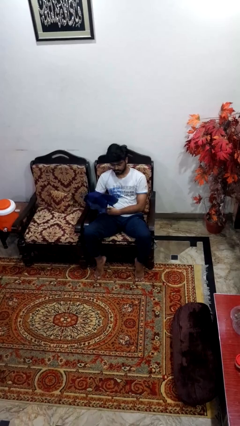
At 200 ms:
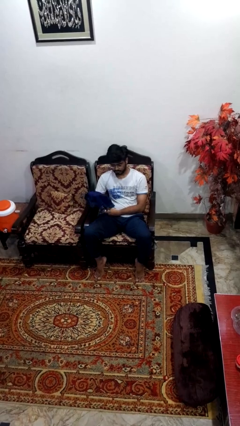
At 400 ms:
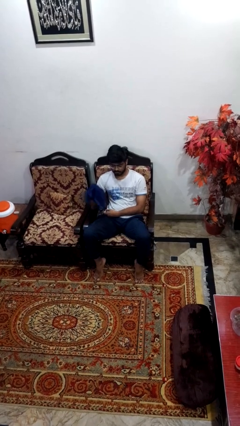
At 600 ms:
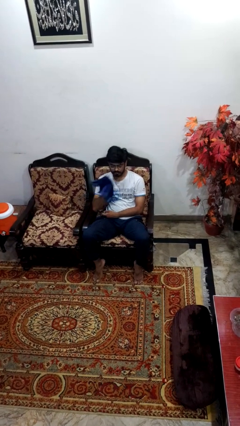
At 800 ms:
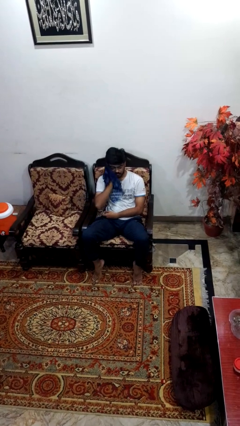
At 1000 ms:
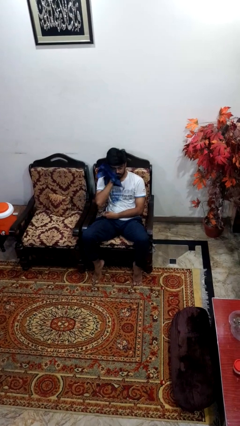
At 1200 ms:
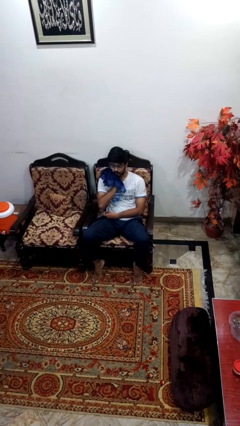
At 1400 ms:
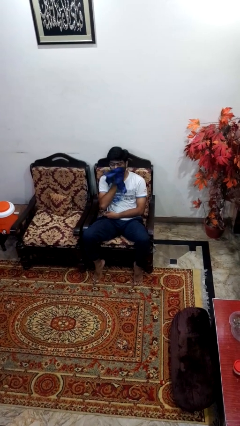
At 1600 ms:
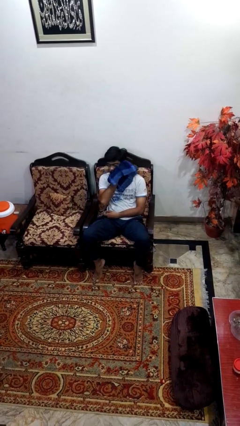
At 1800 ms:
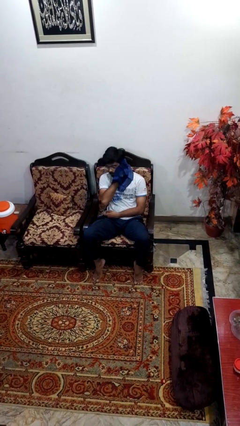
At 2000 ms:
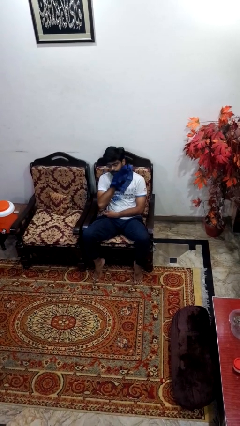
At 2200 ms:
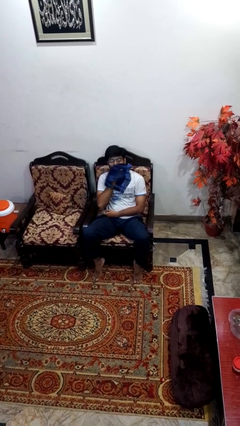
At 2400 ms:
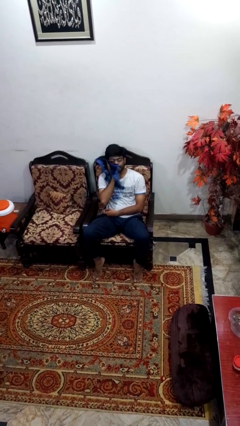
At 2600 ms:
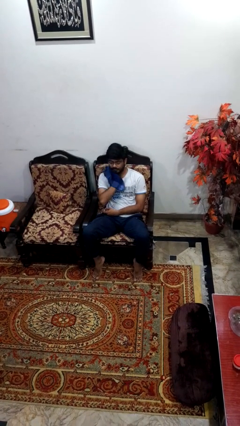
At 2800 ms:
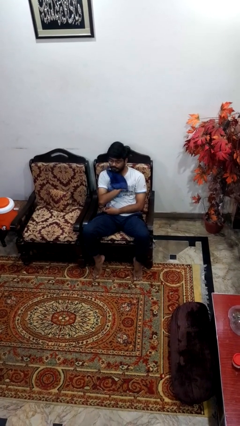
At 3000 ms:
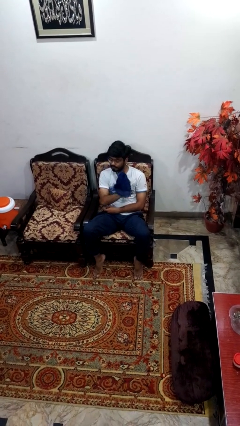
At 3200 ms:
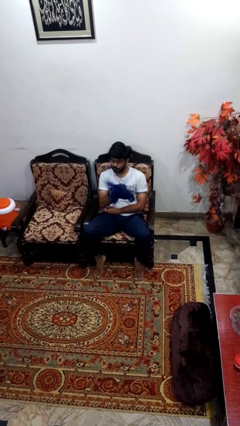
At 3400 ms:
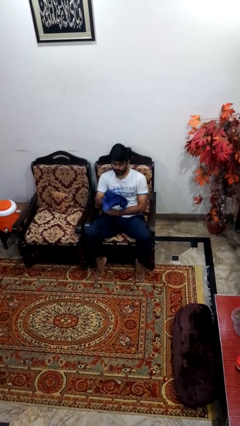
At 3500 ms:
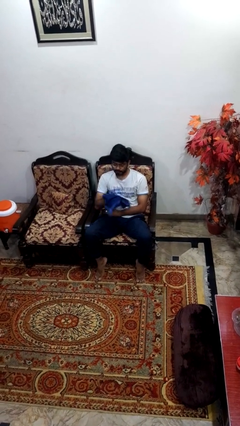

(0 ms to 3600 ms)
person wipes mouth with napkin

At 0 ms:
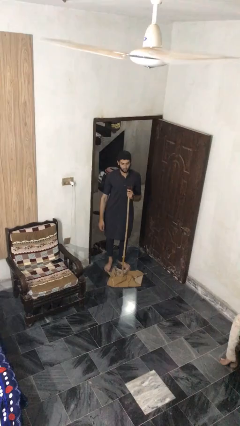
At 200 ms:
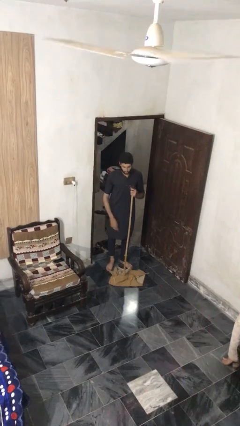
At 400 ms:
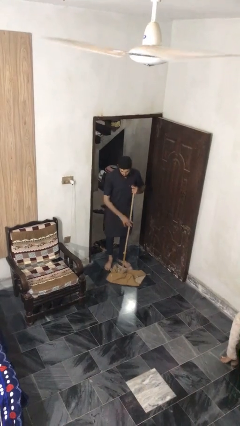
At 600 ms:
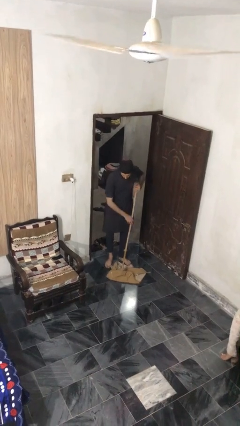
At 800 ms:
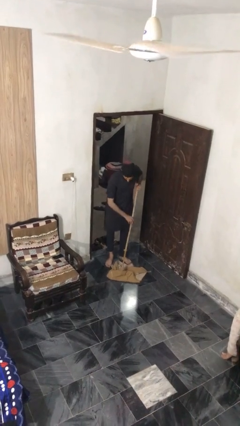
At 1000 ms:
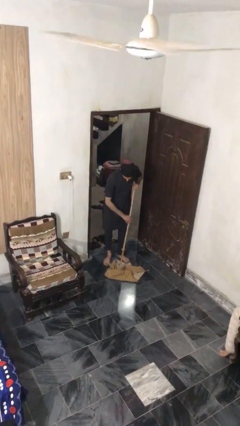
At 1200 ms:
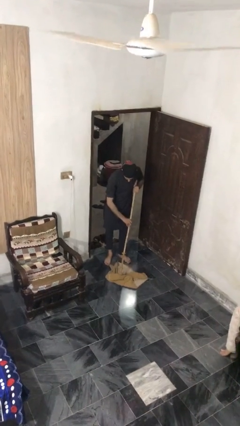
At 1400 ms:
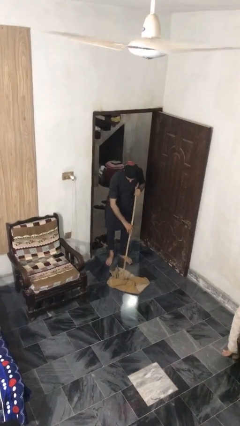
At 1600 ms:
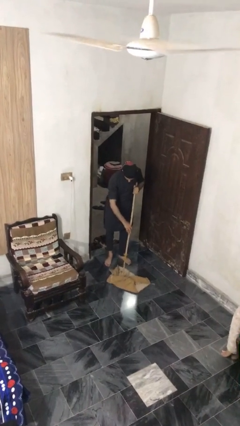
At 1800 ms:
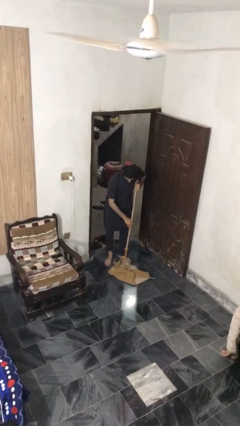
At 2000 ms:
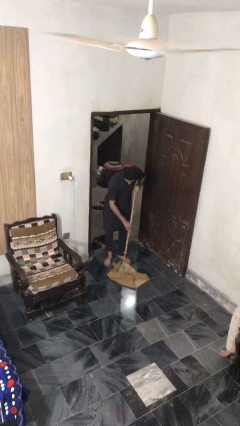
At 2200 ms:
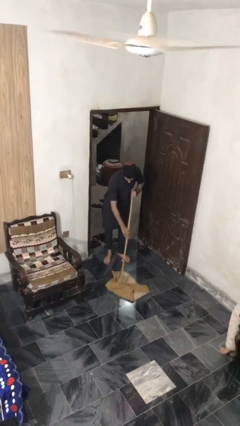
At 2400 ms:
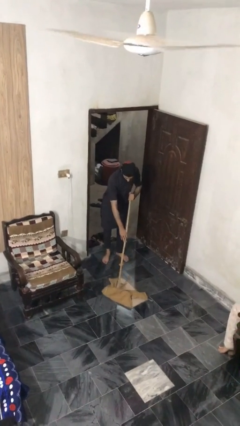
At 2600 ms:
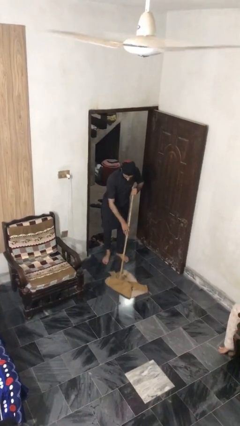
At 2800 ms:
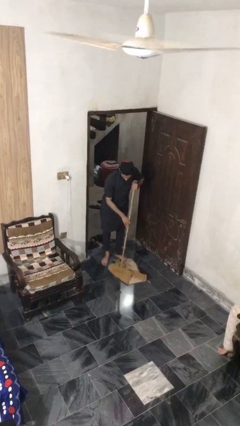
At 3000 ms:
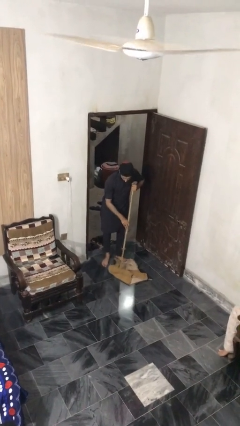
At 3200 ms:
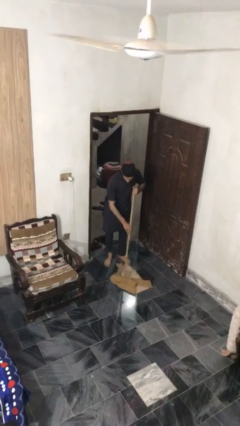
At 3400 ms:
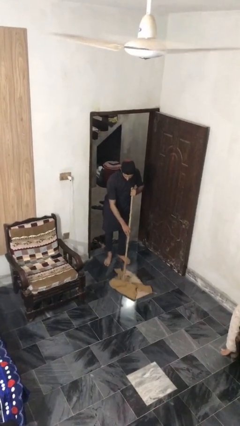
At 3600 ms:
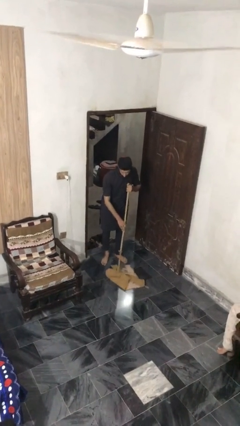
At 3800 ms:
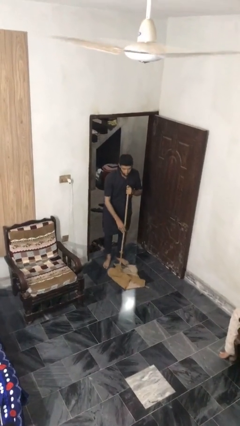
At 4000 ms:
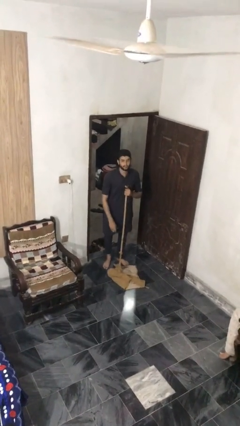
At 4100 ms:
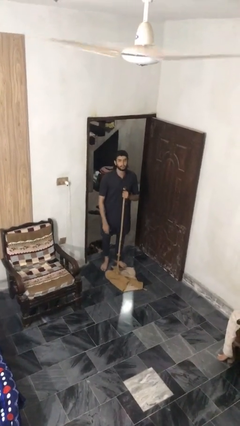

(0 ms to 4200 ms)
person mops

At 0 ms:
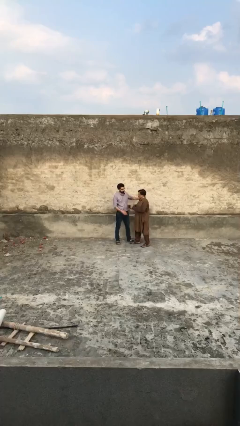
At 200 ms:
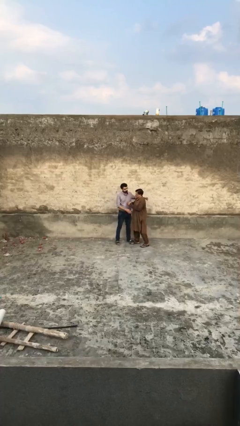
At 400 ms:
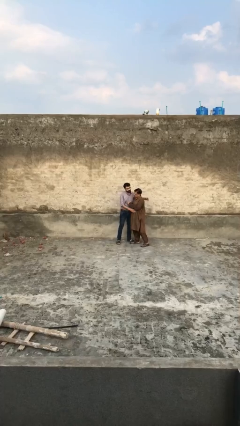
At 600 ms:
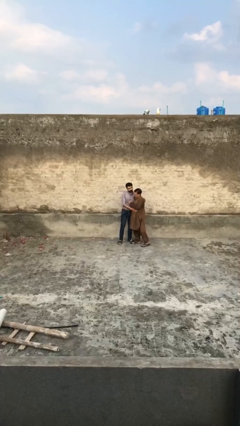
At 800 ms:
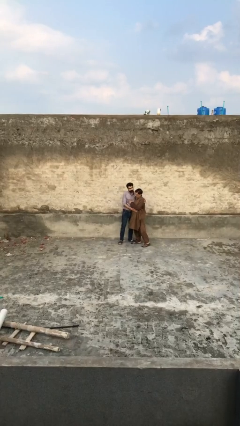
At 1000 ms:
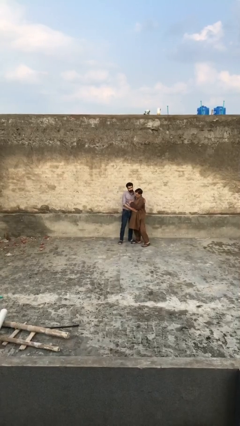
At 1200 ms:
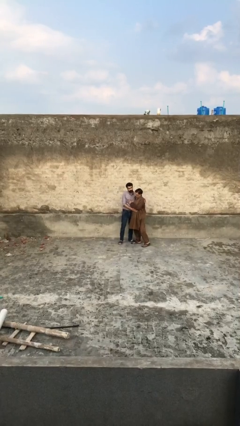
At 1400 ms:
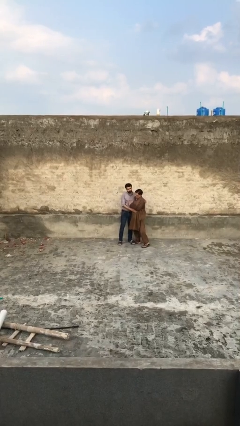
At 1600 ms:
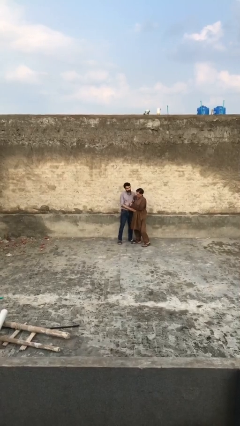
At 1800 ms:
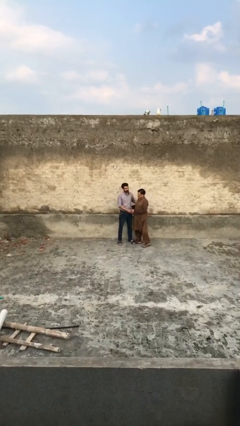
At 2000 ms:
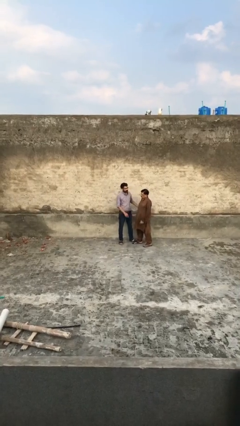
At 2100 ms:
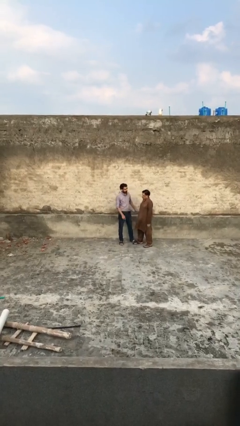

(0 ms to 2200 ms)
person embraces person

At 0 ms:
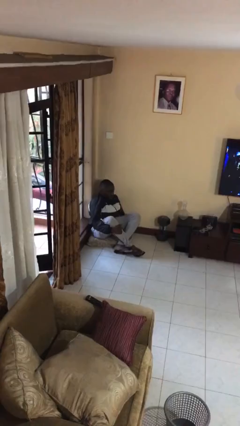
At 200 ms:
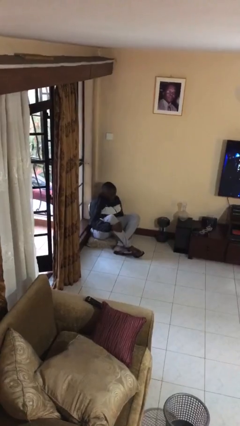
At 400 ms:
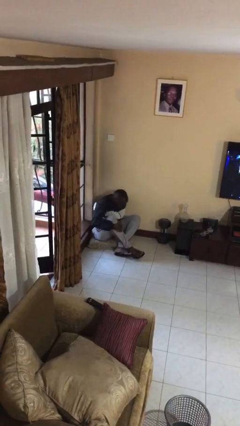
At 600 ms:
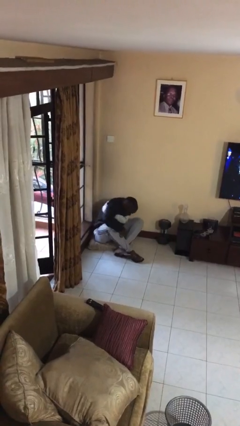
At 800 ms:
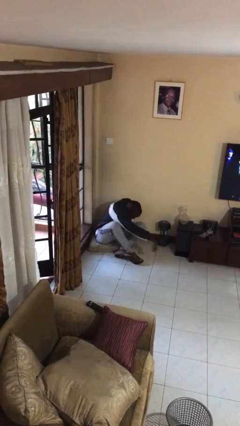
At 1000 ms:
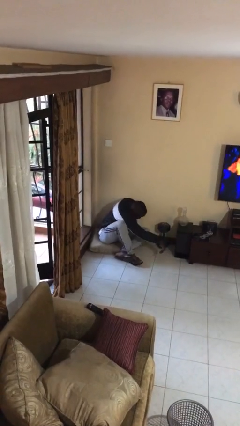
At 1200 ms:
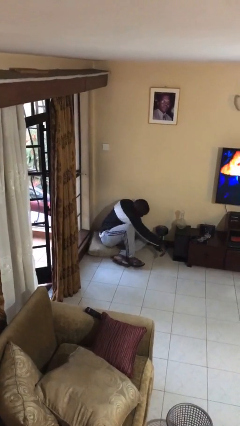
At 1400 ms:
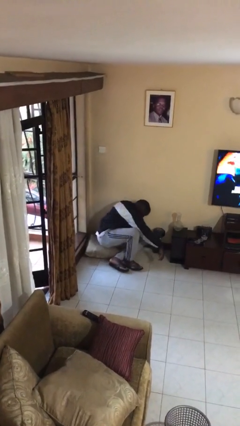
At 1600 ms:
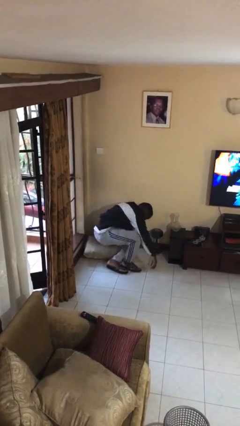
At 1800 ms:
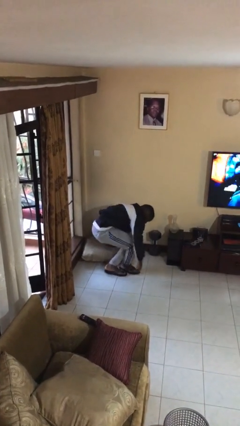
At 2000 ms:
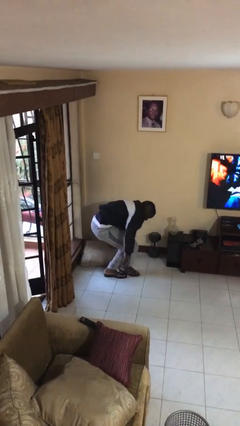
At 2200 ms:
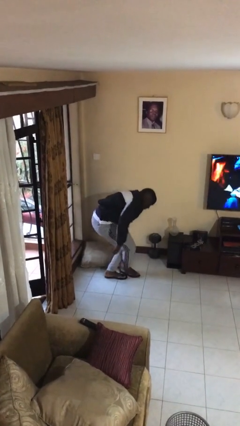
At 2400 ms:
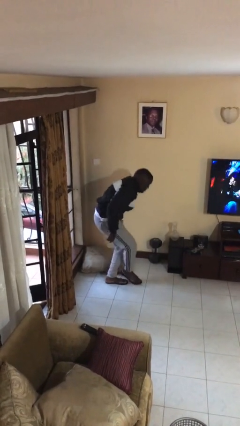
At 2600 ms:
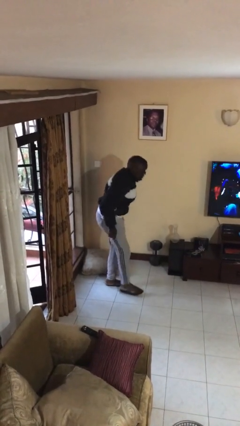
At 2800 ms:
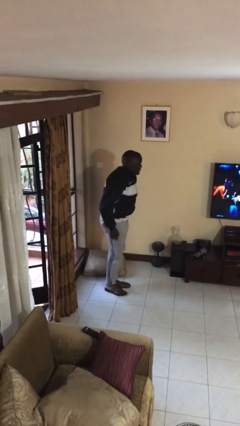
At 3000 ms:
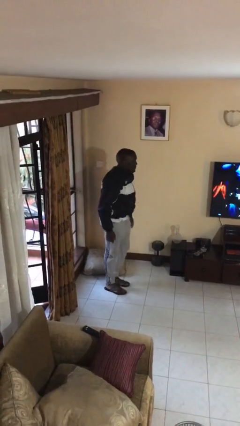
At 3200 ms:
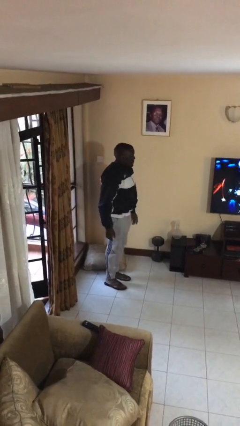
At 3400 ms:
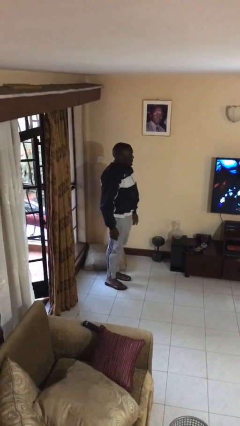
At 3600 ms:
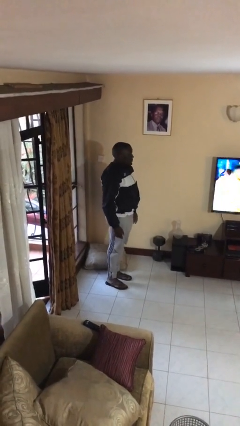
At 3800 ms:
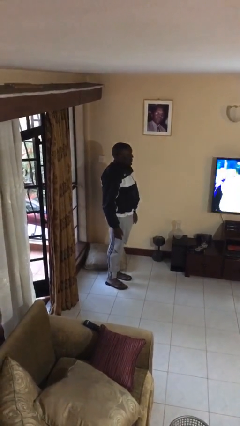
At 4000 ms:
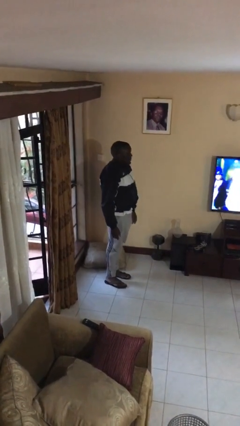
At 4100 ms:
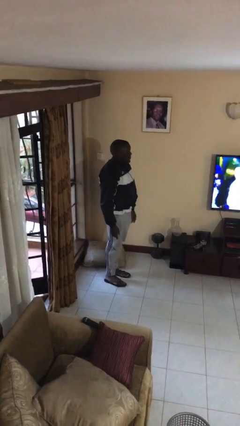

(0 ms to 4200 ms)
person stands up from floor

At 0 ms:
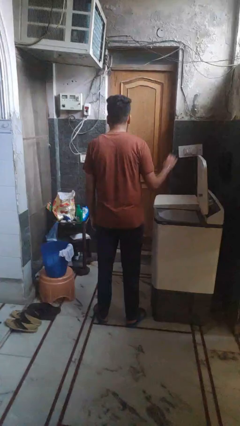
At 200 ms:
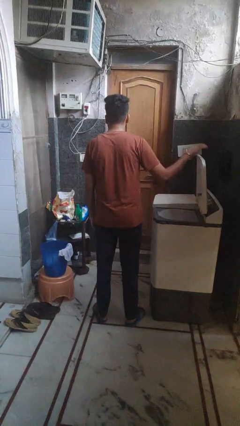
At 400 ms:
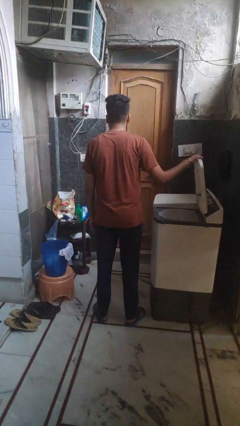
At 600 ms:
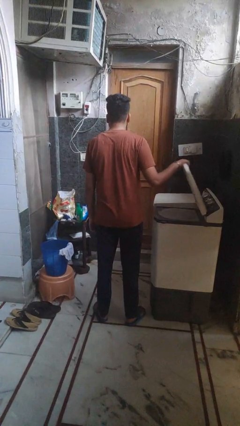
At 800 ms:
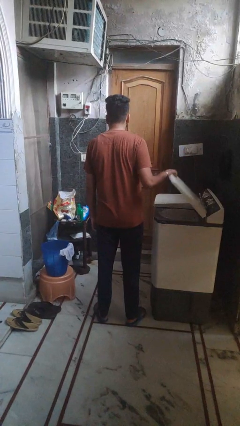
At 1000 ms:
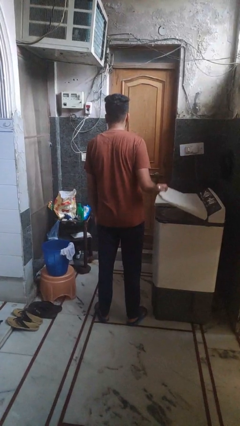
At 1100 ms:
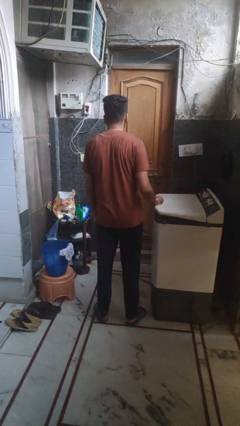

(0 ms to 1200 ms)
person closes clothes washer

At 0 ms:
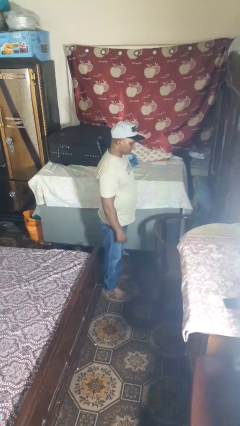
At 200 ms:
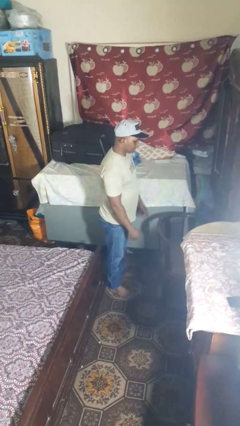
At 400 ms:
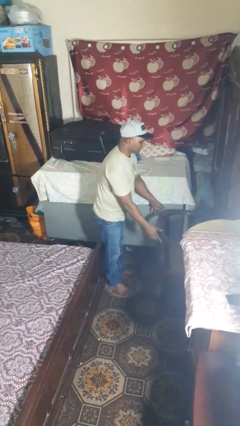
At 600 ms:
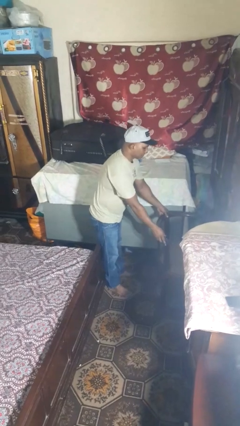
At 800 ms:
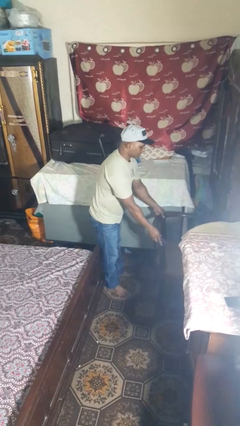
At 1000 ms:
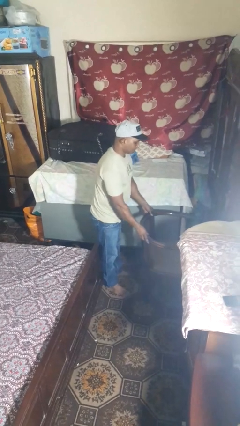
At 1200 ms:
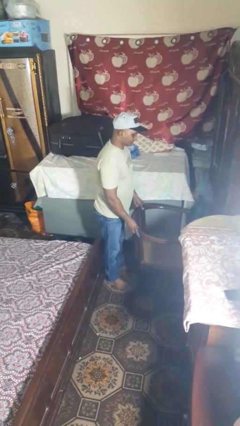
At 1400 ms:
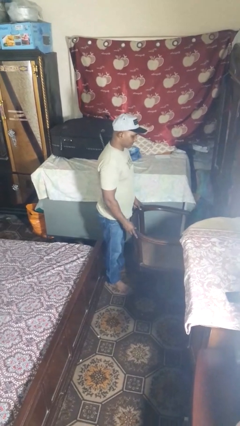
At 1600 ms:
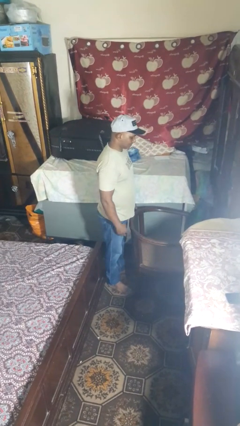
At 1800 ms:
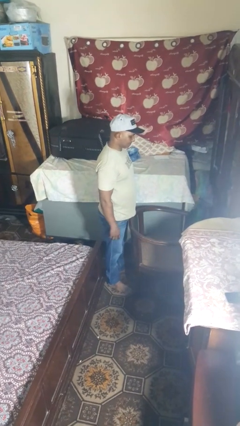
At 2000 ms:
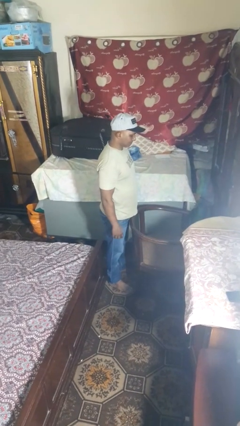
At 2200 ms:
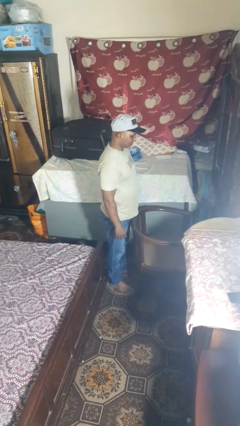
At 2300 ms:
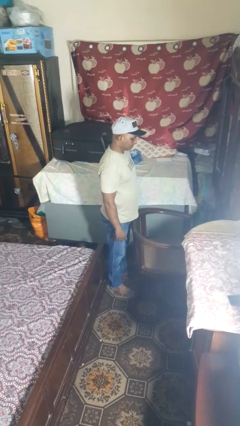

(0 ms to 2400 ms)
person pulls out chair
